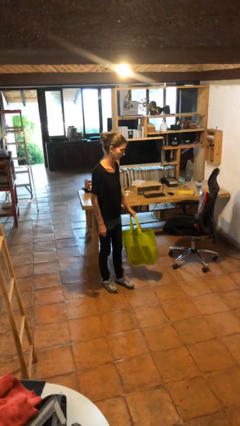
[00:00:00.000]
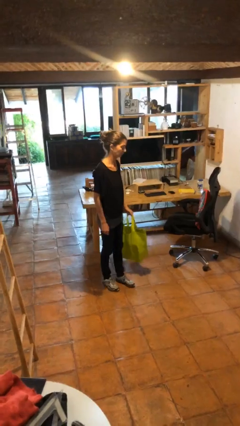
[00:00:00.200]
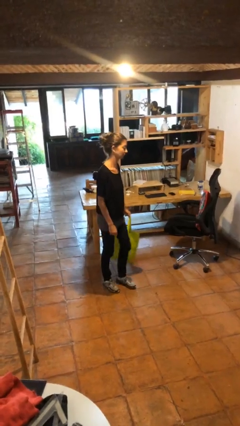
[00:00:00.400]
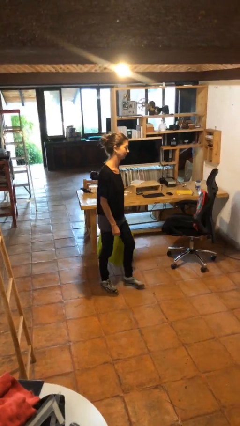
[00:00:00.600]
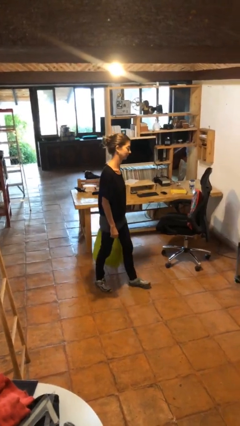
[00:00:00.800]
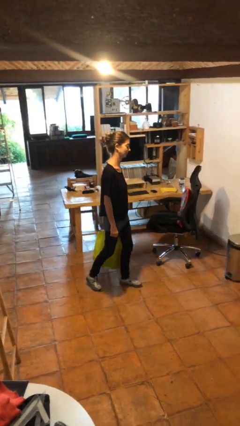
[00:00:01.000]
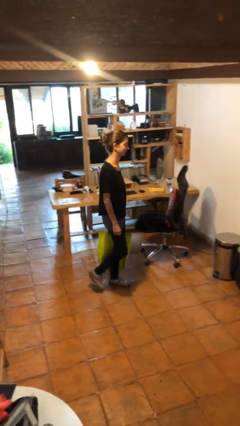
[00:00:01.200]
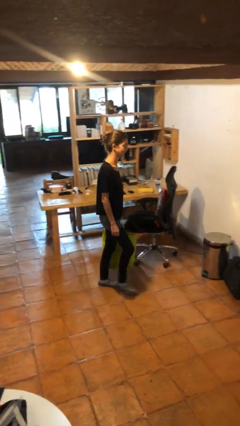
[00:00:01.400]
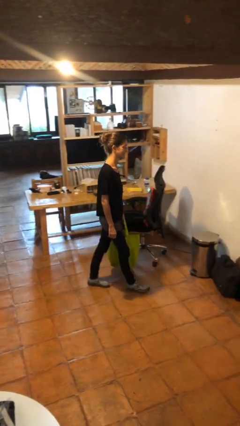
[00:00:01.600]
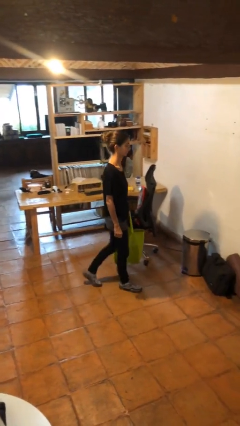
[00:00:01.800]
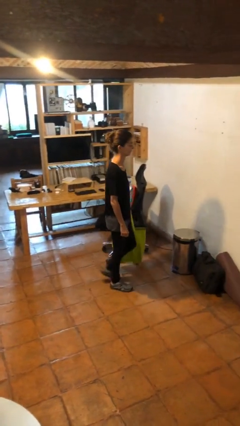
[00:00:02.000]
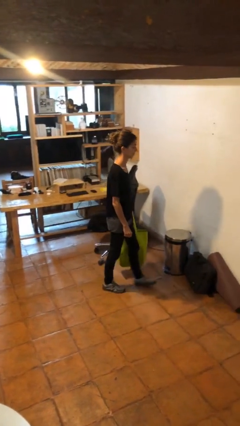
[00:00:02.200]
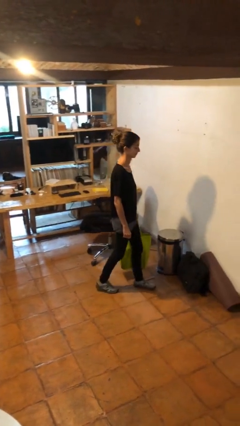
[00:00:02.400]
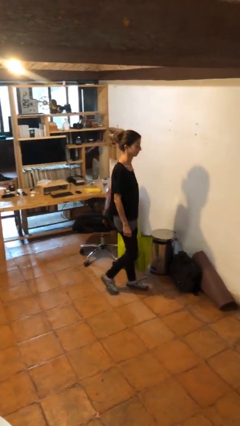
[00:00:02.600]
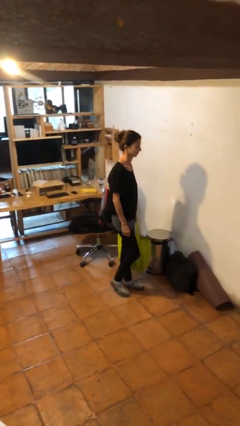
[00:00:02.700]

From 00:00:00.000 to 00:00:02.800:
person carries groceries

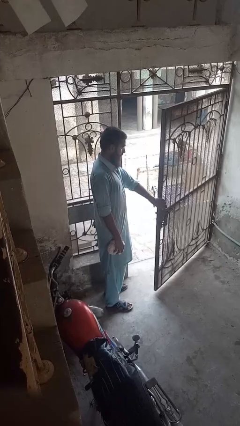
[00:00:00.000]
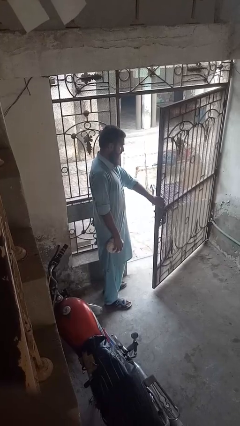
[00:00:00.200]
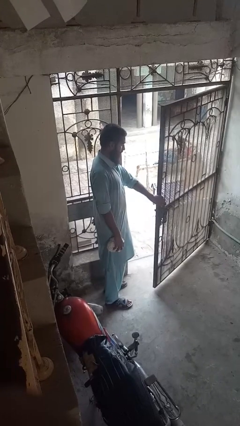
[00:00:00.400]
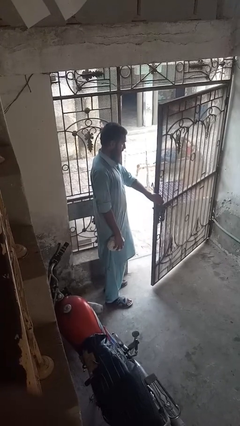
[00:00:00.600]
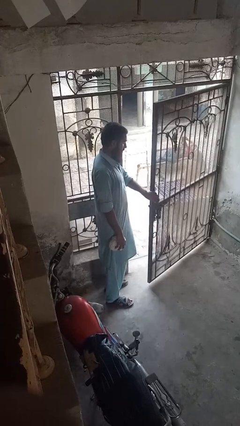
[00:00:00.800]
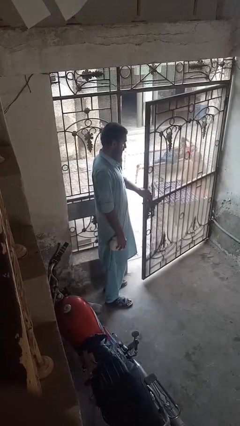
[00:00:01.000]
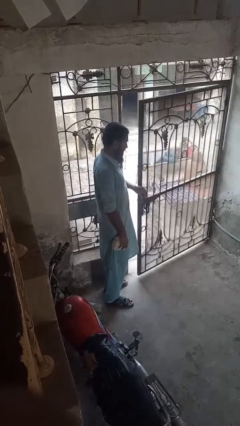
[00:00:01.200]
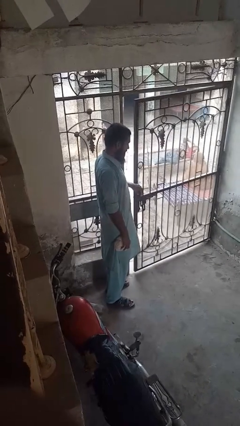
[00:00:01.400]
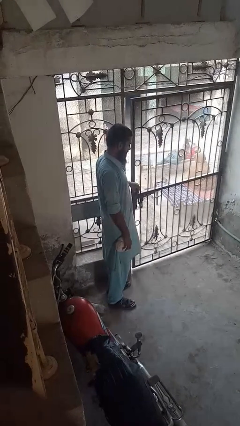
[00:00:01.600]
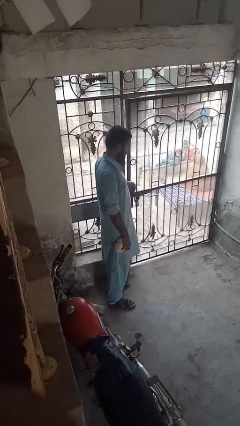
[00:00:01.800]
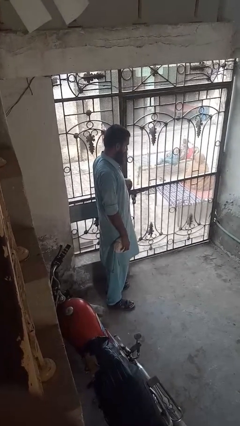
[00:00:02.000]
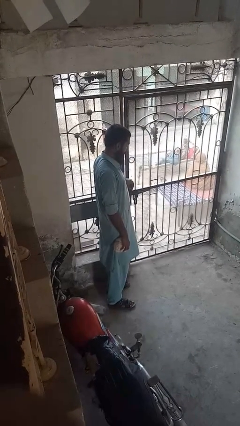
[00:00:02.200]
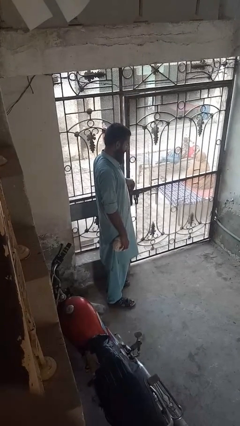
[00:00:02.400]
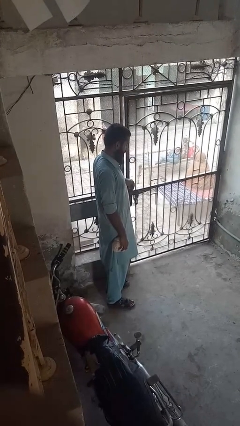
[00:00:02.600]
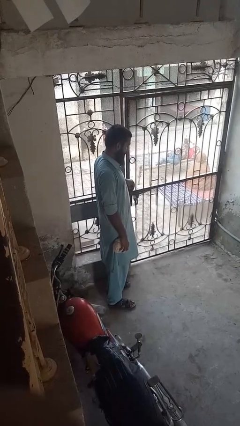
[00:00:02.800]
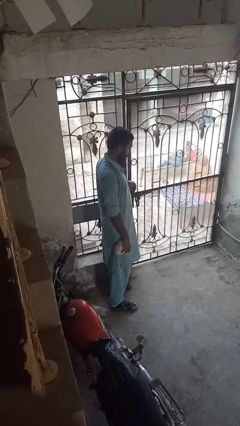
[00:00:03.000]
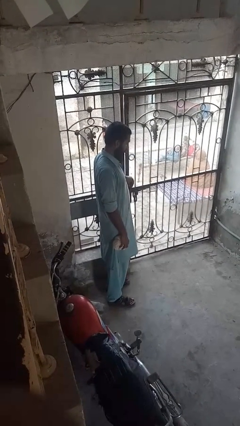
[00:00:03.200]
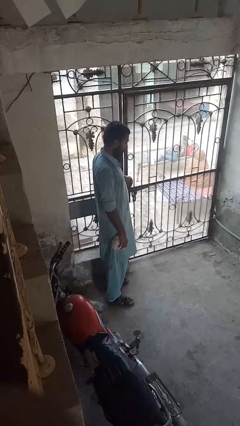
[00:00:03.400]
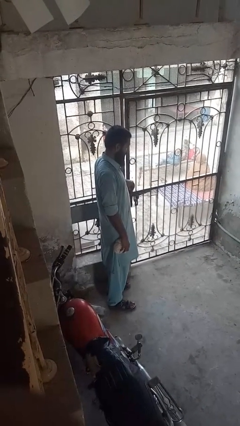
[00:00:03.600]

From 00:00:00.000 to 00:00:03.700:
person closes gate

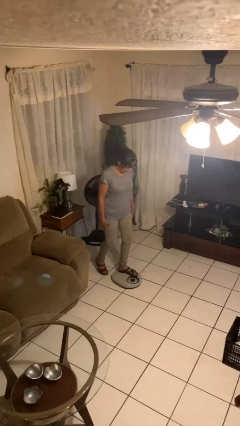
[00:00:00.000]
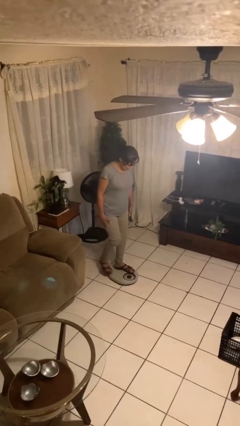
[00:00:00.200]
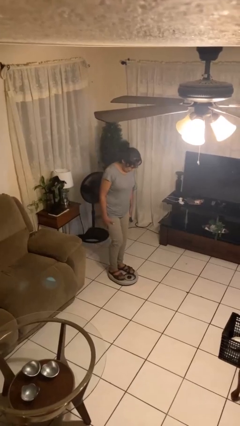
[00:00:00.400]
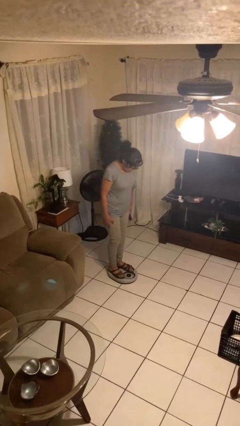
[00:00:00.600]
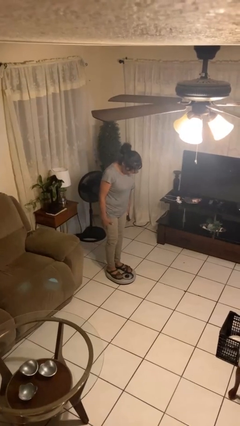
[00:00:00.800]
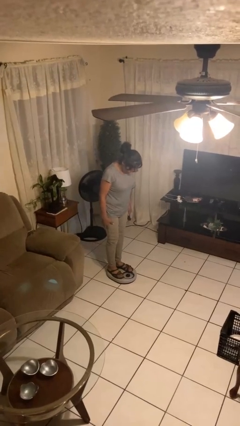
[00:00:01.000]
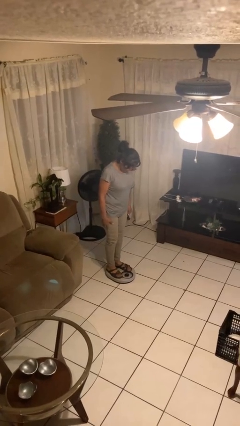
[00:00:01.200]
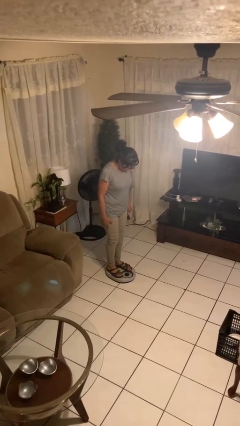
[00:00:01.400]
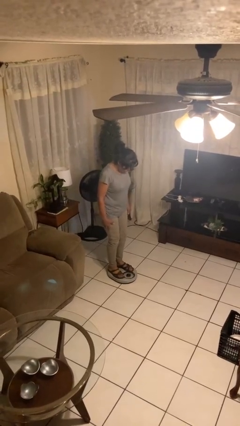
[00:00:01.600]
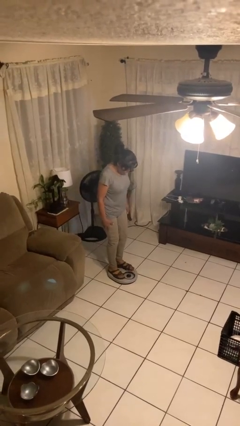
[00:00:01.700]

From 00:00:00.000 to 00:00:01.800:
person uses bodyweight scale

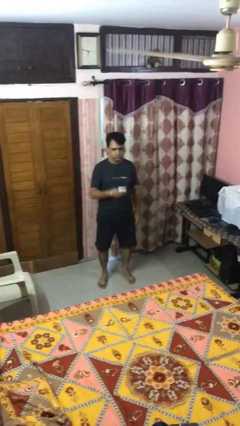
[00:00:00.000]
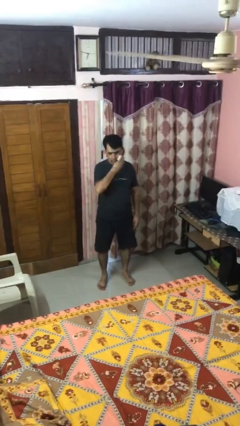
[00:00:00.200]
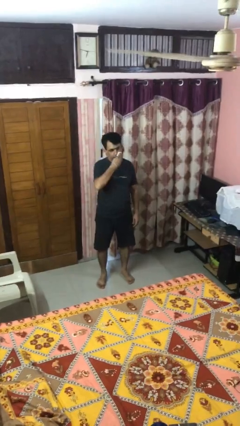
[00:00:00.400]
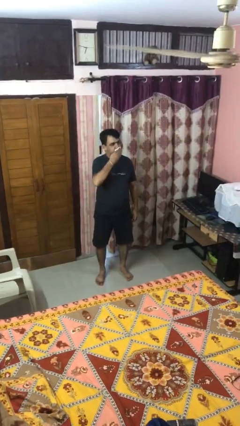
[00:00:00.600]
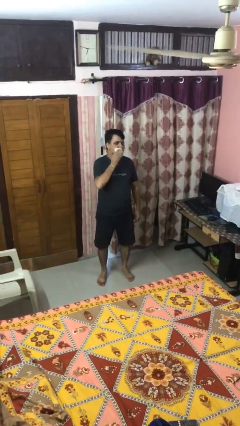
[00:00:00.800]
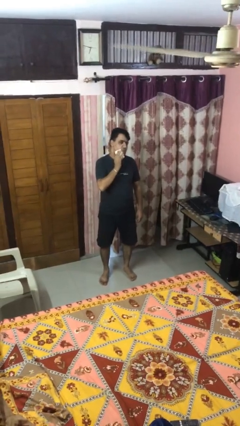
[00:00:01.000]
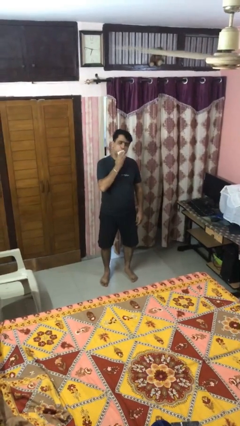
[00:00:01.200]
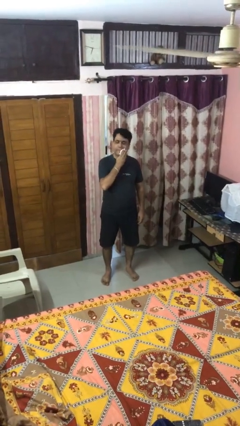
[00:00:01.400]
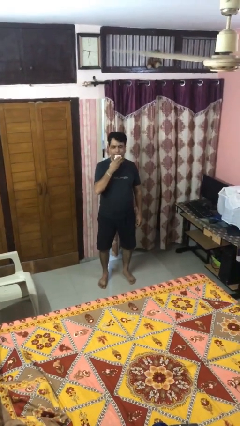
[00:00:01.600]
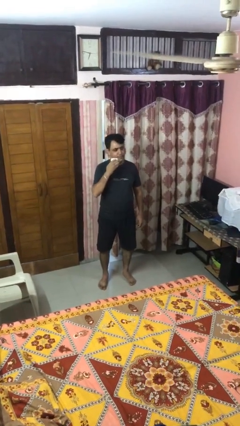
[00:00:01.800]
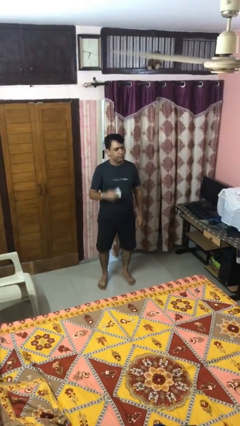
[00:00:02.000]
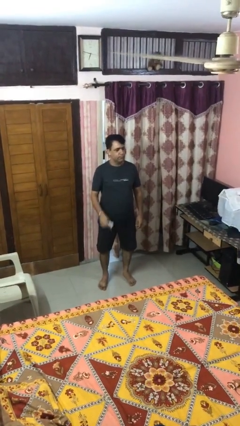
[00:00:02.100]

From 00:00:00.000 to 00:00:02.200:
person wipes mouth with napkin

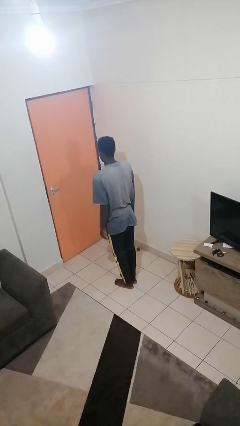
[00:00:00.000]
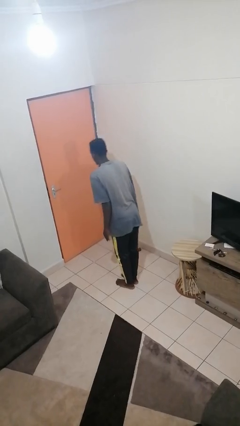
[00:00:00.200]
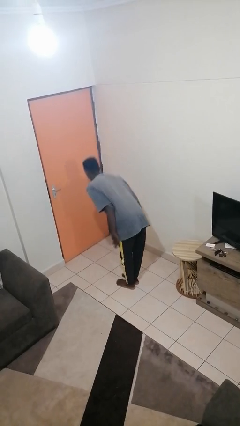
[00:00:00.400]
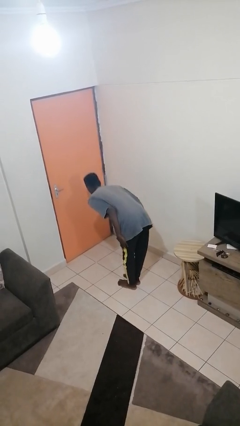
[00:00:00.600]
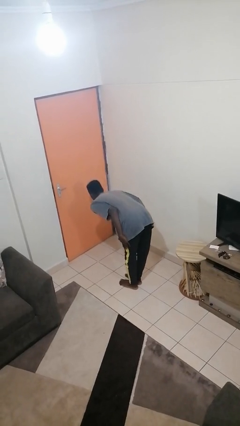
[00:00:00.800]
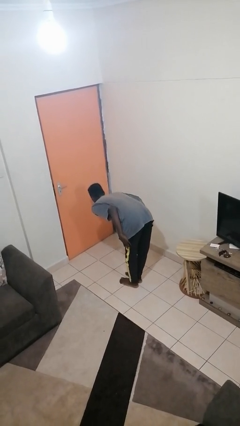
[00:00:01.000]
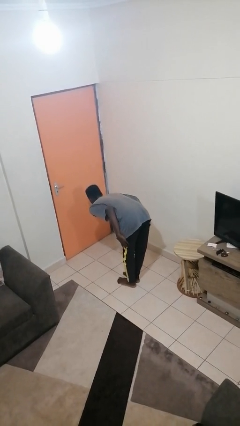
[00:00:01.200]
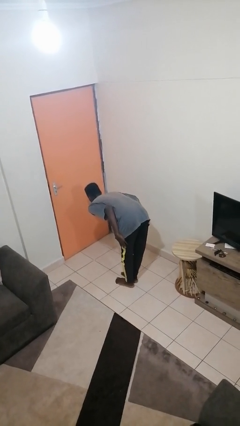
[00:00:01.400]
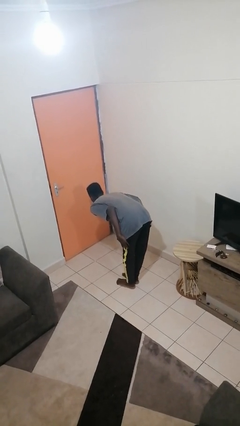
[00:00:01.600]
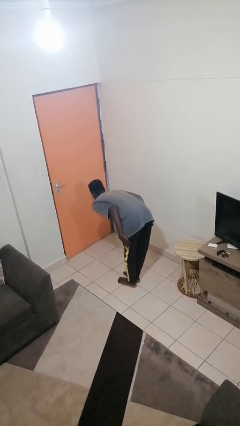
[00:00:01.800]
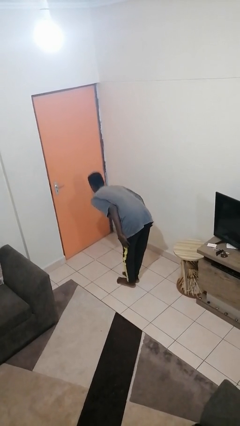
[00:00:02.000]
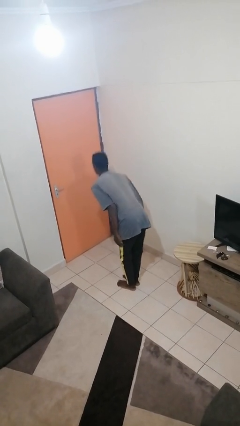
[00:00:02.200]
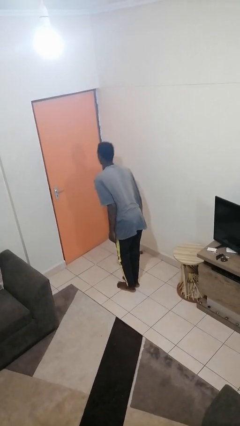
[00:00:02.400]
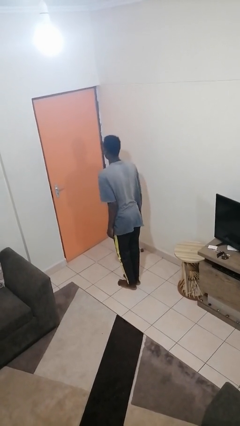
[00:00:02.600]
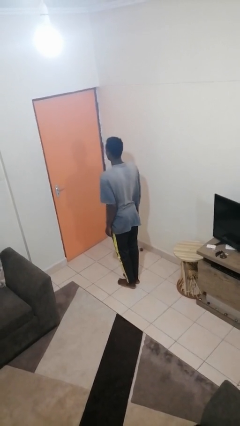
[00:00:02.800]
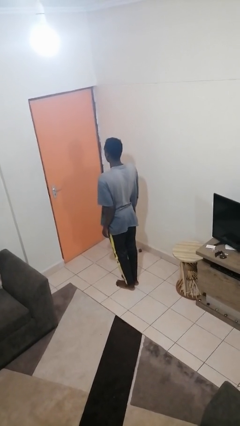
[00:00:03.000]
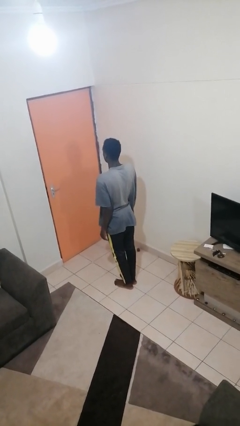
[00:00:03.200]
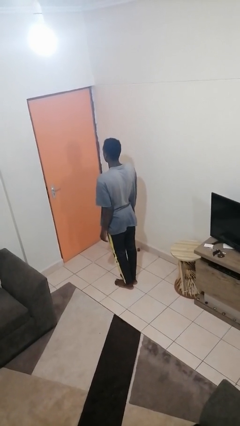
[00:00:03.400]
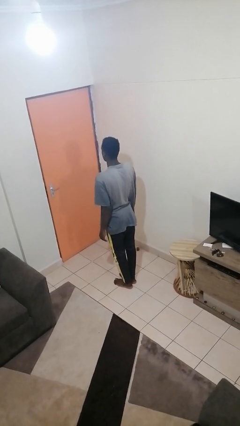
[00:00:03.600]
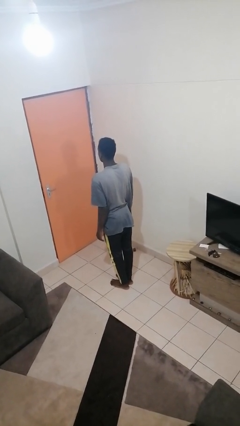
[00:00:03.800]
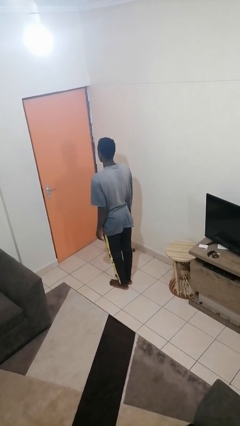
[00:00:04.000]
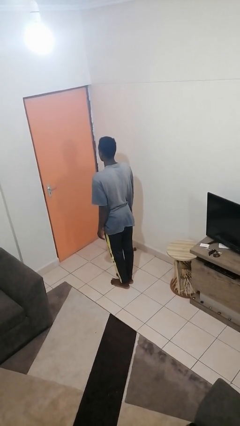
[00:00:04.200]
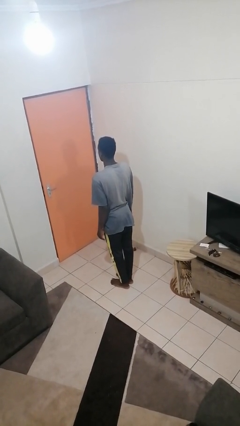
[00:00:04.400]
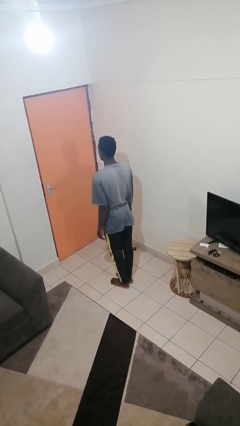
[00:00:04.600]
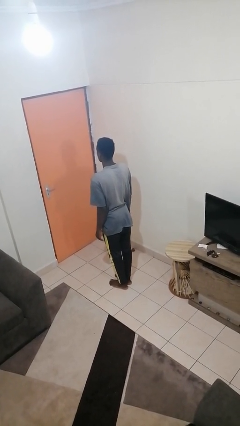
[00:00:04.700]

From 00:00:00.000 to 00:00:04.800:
person bows

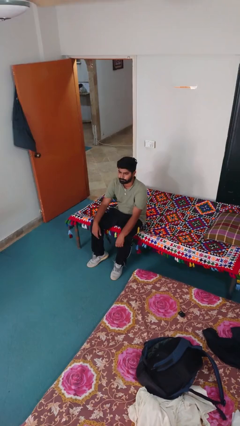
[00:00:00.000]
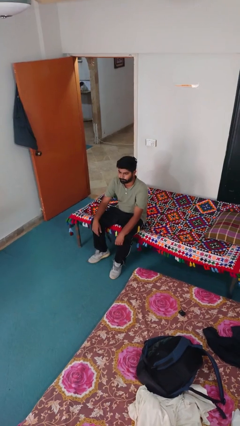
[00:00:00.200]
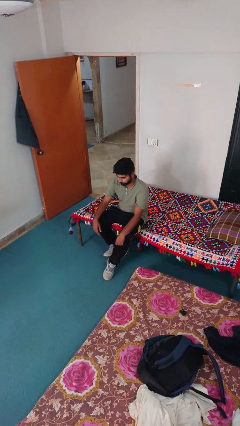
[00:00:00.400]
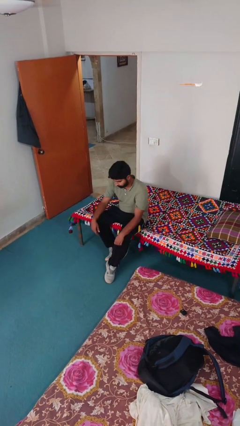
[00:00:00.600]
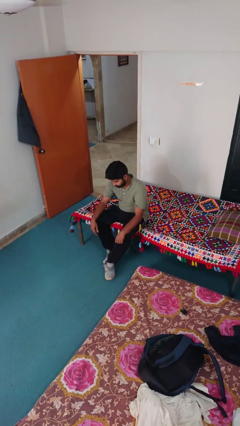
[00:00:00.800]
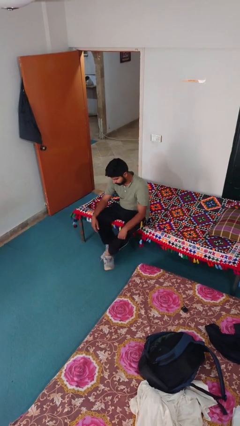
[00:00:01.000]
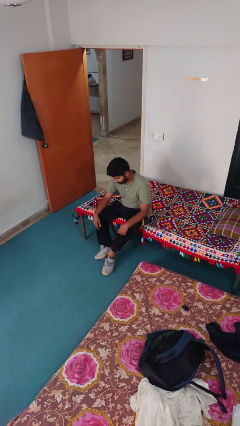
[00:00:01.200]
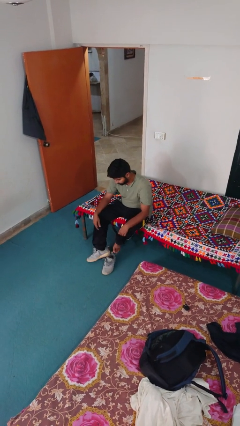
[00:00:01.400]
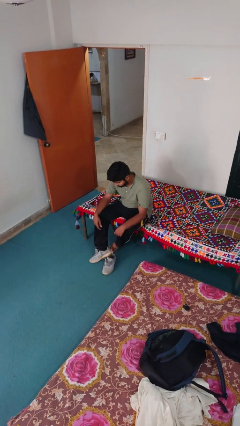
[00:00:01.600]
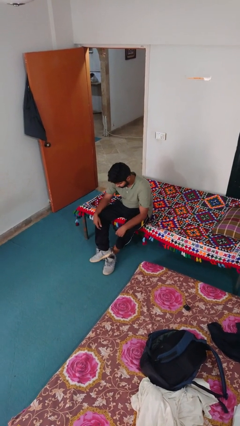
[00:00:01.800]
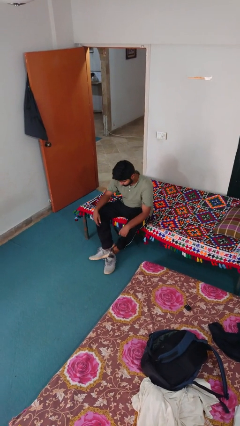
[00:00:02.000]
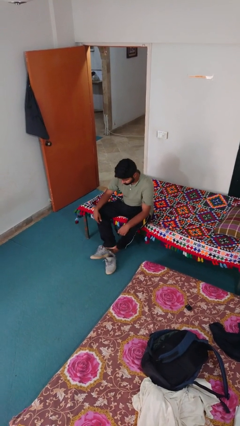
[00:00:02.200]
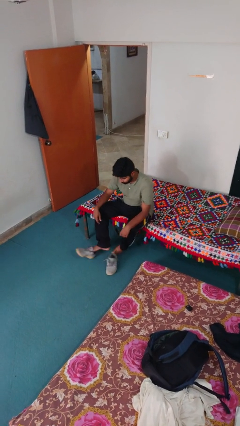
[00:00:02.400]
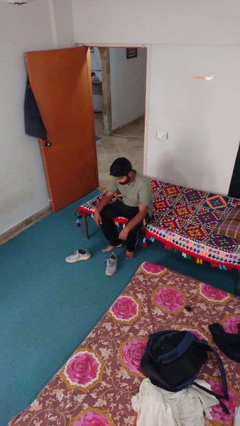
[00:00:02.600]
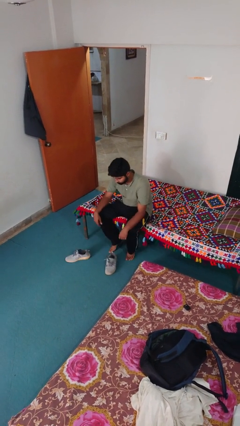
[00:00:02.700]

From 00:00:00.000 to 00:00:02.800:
person takes off shoes
